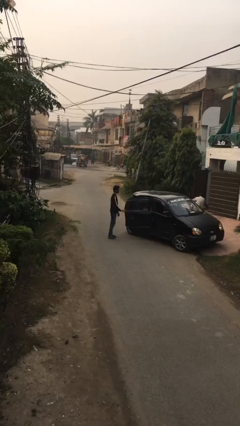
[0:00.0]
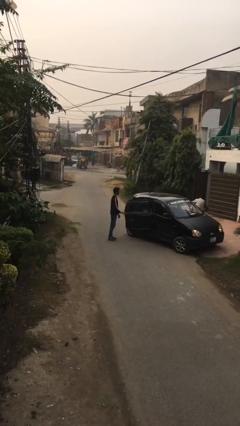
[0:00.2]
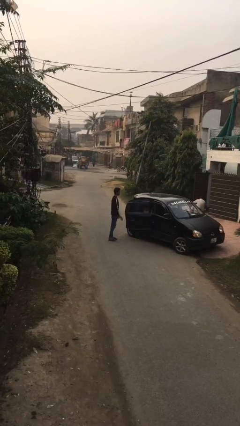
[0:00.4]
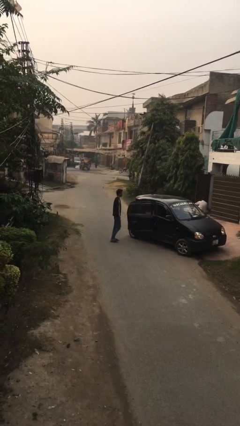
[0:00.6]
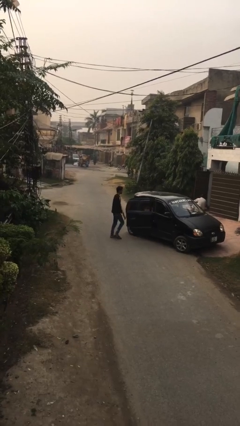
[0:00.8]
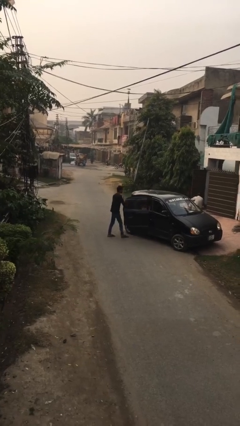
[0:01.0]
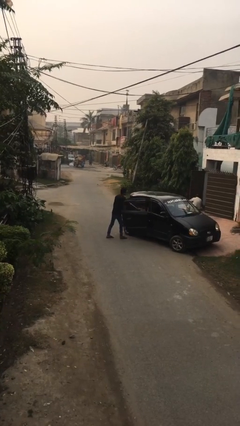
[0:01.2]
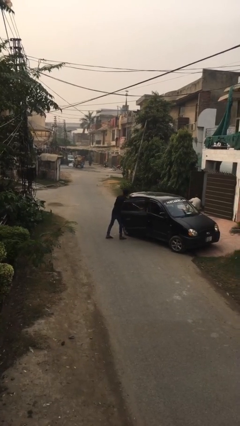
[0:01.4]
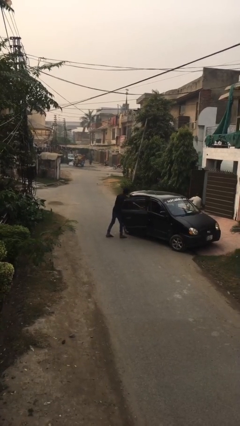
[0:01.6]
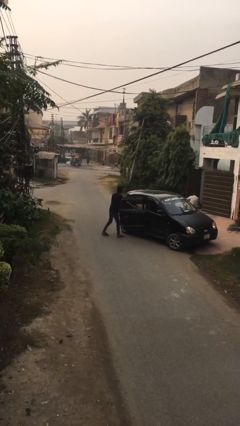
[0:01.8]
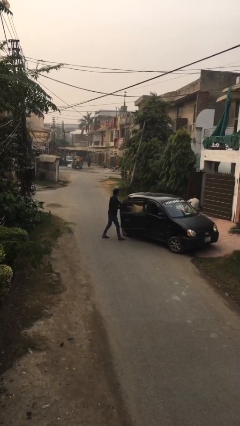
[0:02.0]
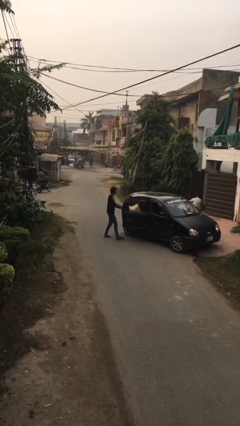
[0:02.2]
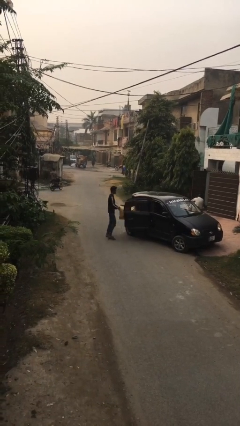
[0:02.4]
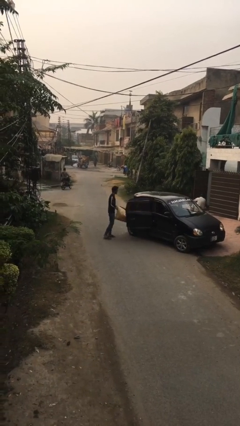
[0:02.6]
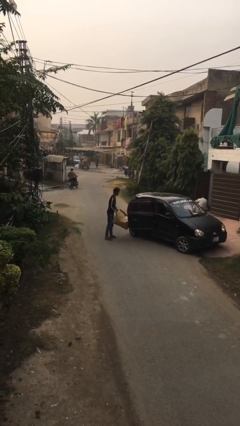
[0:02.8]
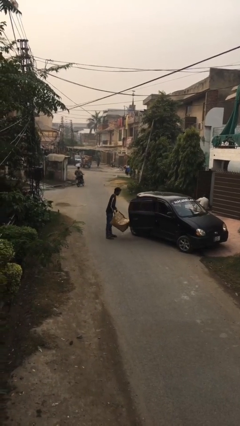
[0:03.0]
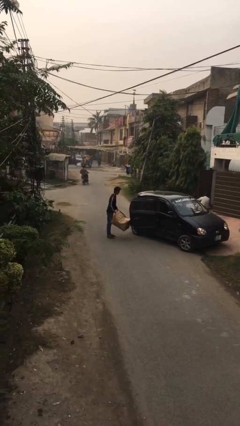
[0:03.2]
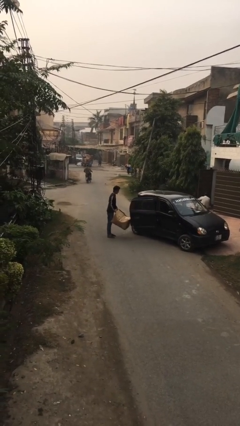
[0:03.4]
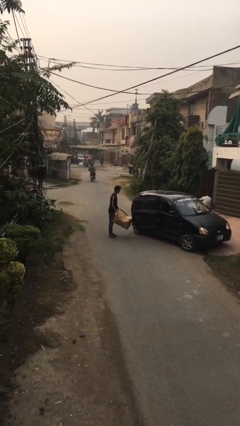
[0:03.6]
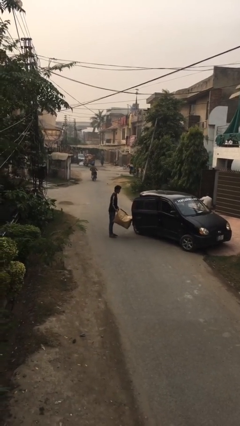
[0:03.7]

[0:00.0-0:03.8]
person unloads car

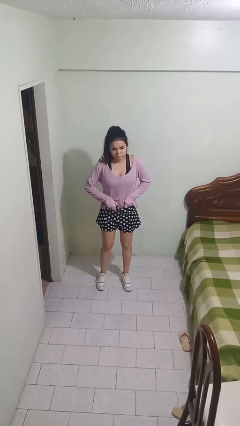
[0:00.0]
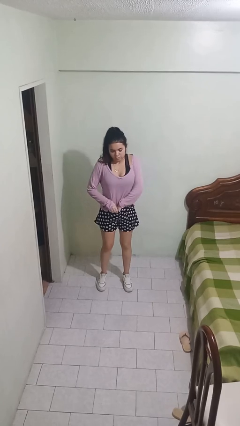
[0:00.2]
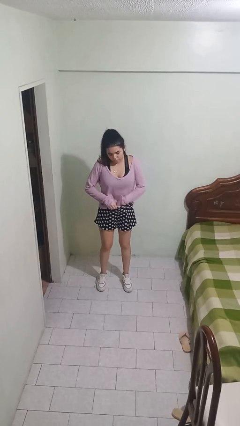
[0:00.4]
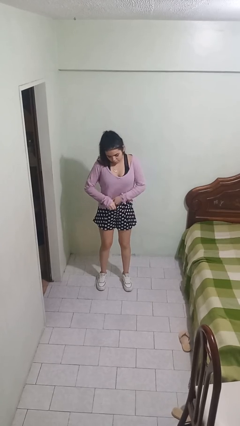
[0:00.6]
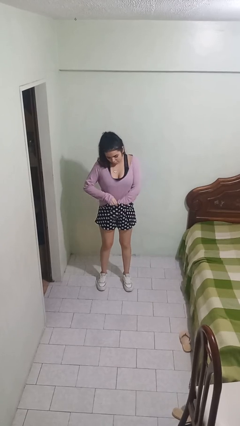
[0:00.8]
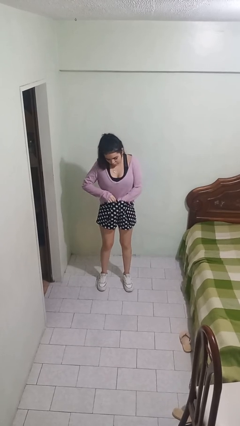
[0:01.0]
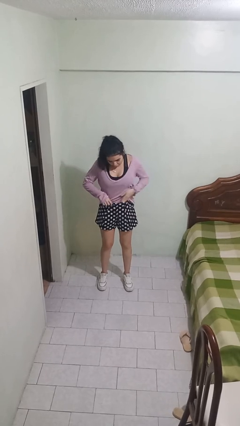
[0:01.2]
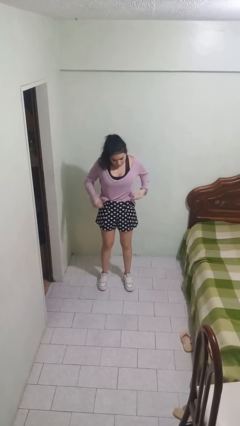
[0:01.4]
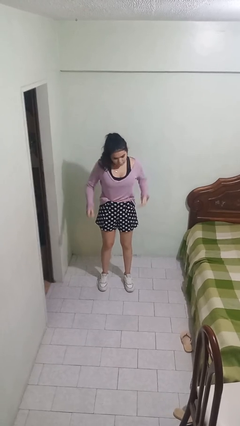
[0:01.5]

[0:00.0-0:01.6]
person tucks in shirt

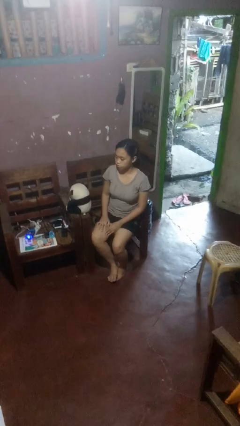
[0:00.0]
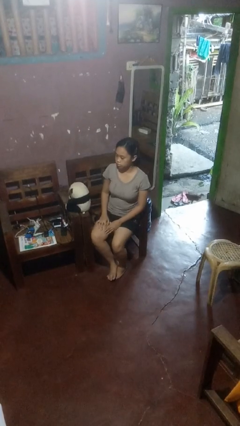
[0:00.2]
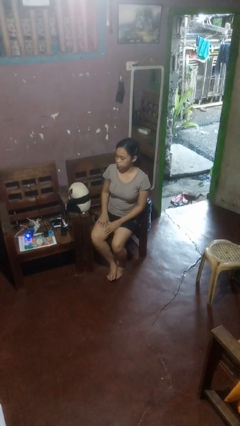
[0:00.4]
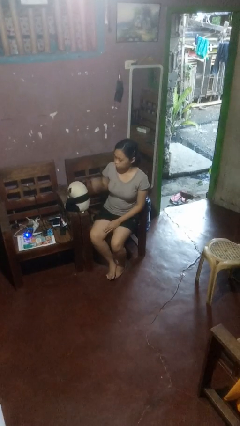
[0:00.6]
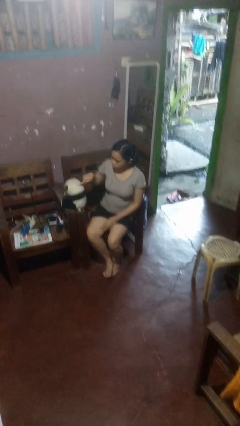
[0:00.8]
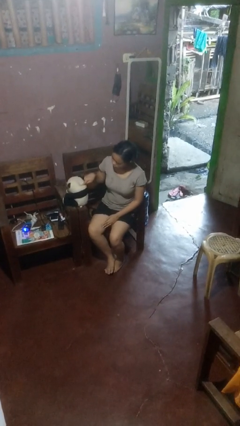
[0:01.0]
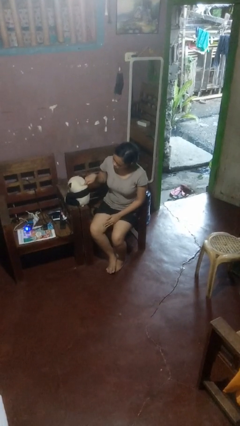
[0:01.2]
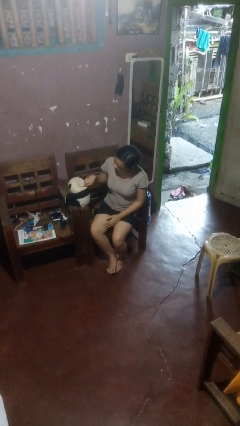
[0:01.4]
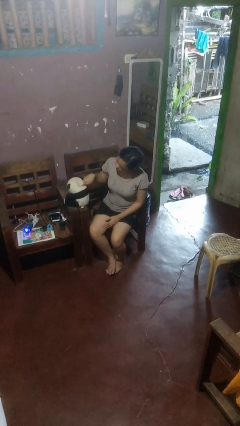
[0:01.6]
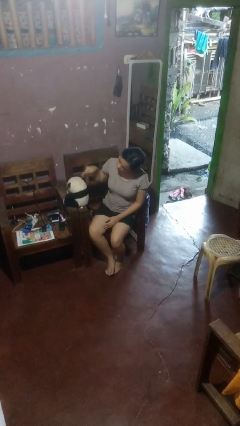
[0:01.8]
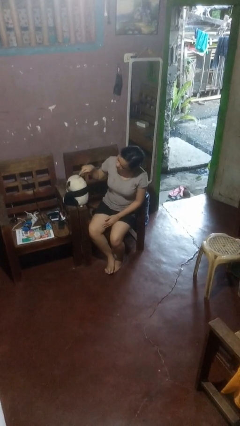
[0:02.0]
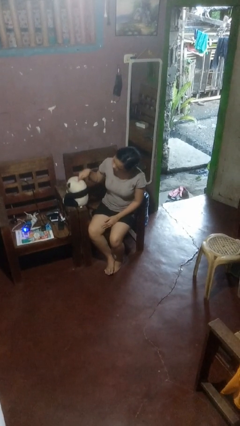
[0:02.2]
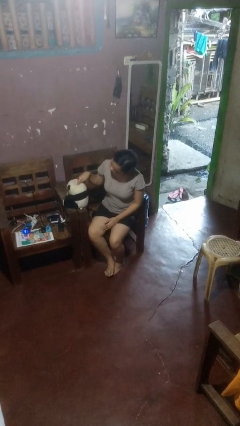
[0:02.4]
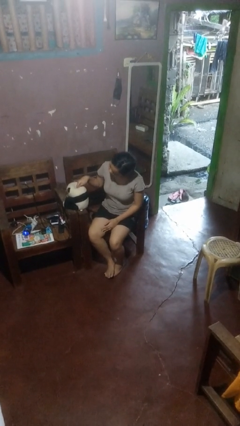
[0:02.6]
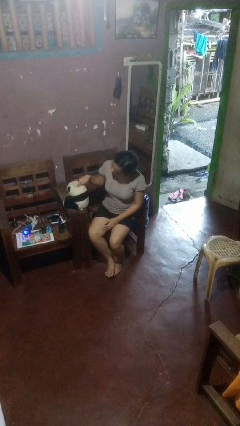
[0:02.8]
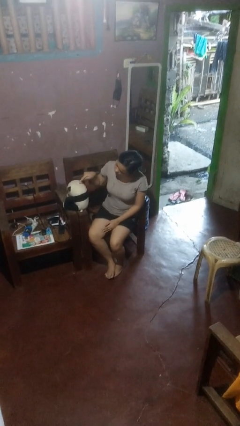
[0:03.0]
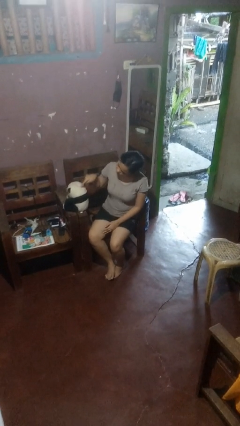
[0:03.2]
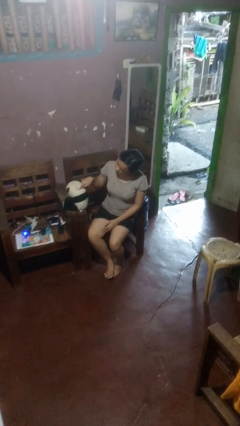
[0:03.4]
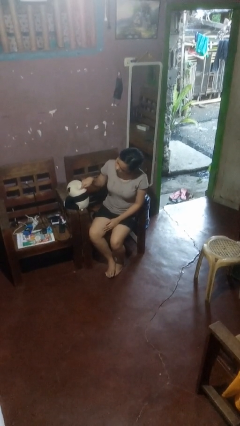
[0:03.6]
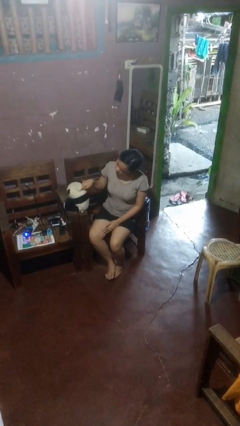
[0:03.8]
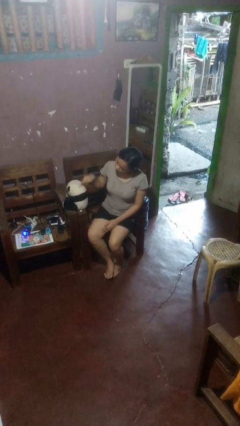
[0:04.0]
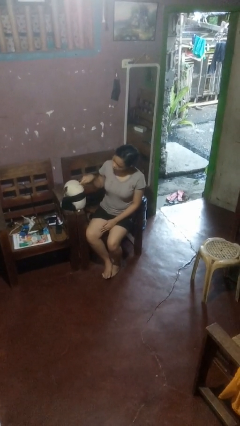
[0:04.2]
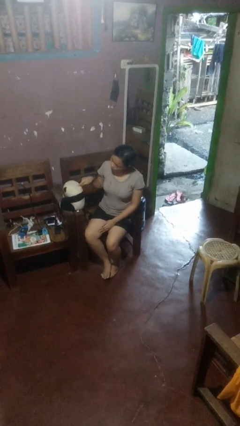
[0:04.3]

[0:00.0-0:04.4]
person taps object with finger

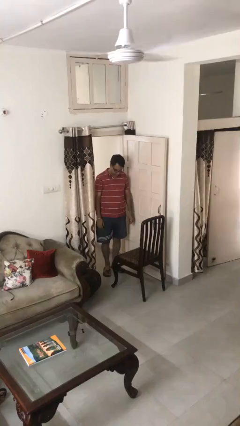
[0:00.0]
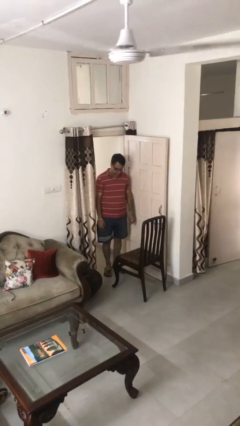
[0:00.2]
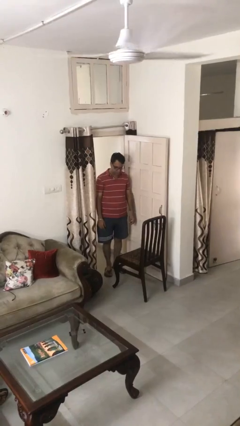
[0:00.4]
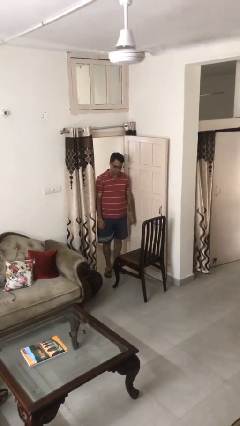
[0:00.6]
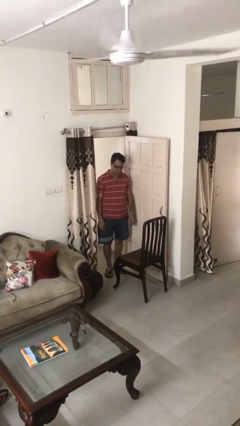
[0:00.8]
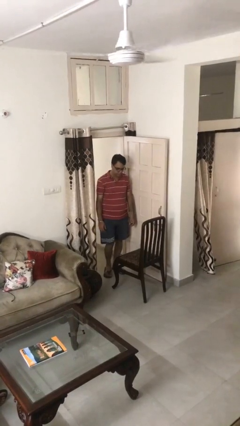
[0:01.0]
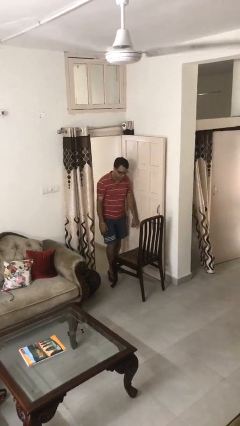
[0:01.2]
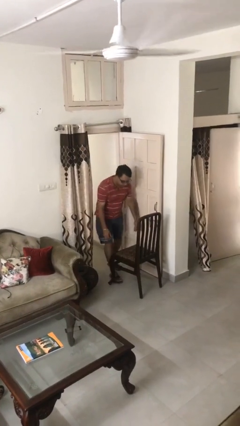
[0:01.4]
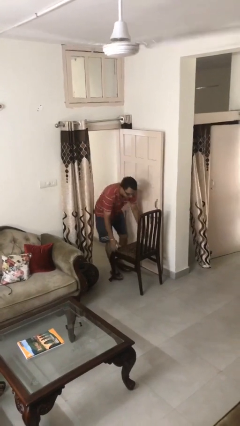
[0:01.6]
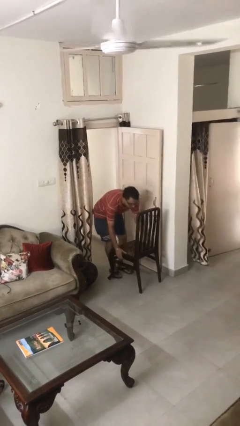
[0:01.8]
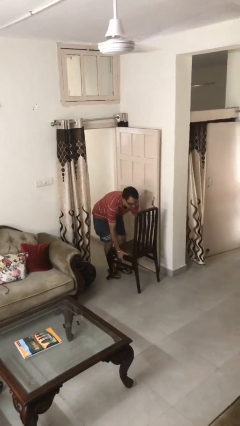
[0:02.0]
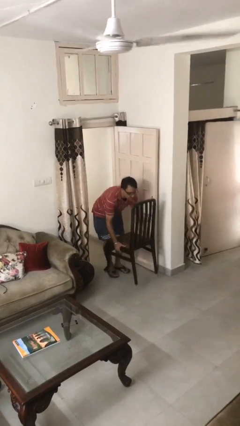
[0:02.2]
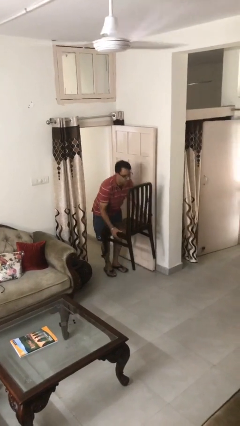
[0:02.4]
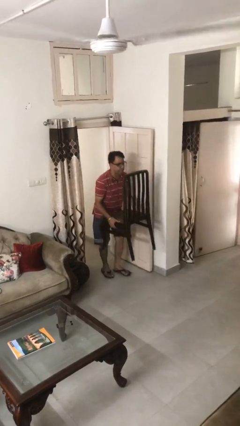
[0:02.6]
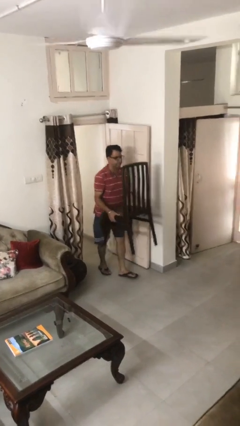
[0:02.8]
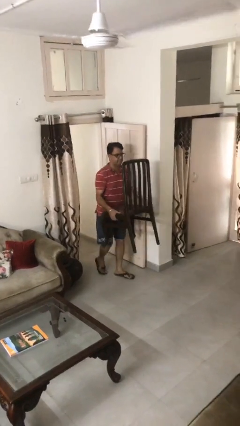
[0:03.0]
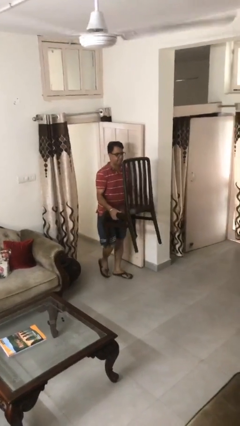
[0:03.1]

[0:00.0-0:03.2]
person picks up object from floor

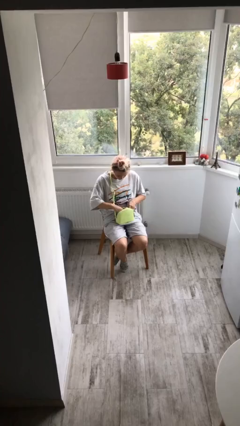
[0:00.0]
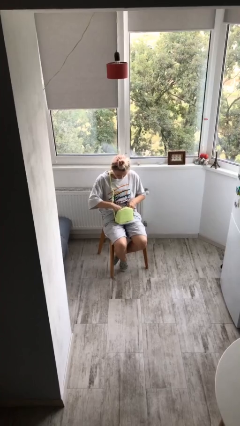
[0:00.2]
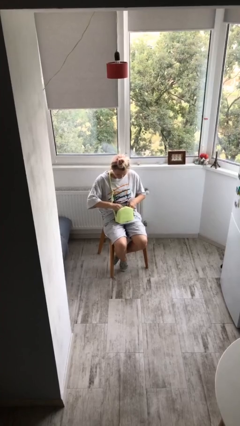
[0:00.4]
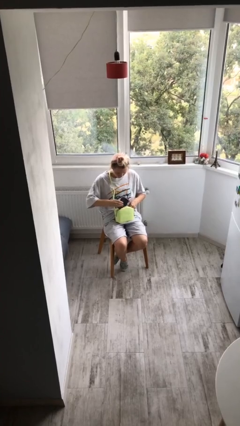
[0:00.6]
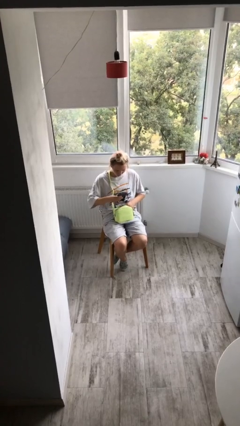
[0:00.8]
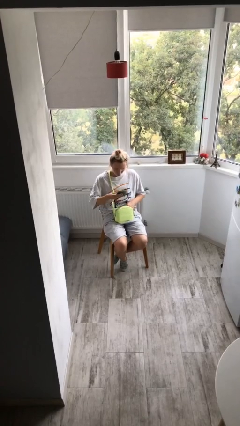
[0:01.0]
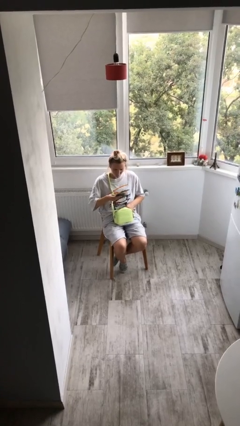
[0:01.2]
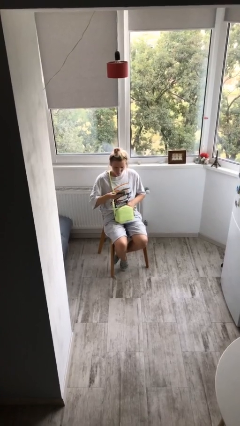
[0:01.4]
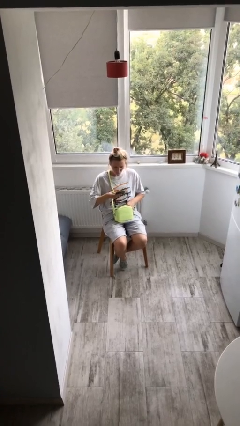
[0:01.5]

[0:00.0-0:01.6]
person takes object from purse

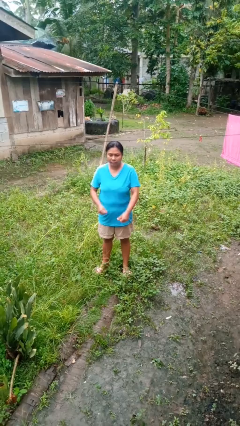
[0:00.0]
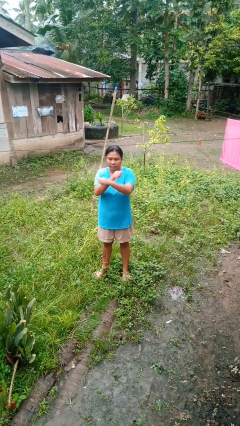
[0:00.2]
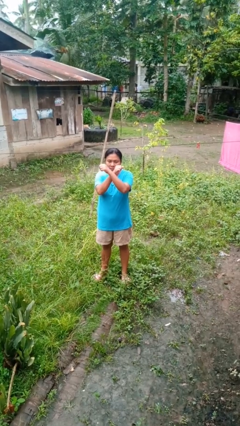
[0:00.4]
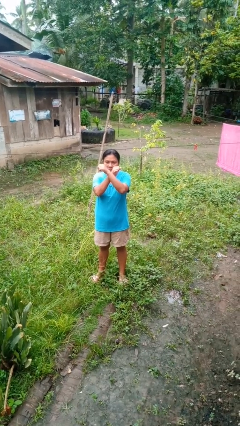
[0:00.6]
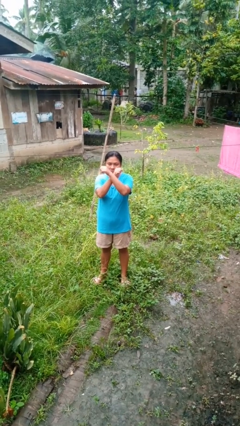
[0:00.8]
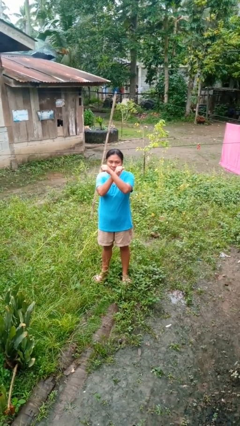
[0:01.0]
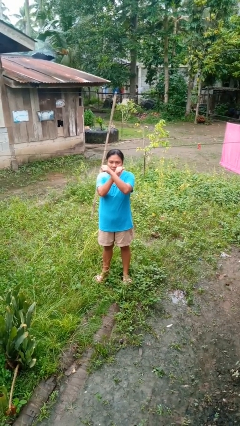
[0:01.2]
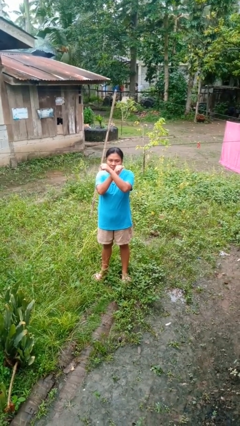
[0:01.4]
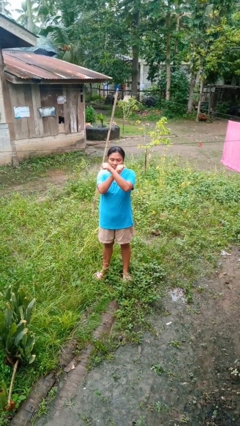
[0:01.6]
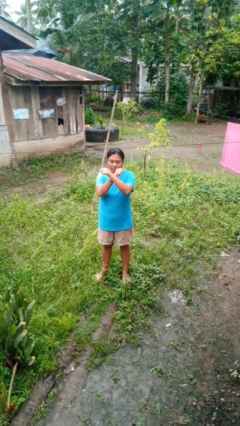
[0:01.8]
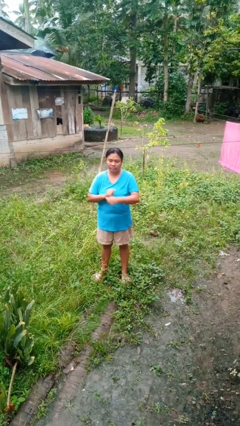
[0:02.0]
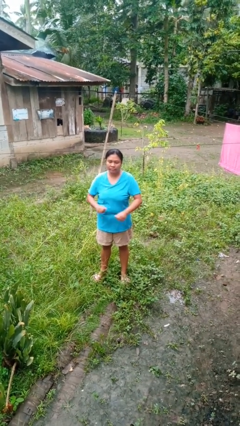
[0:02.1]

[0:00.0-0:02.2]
person gestures arms x

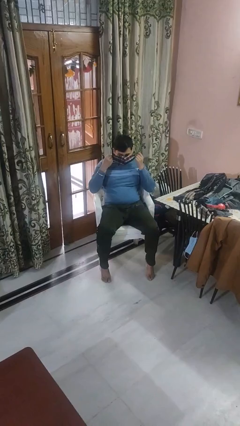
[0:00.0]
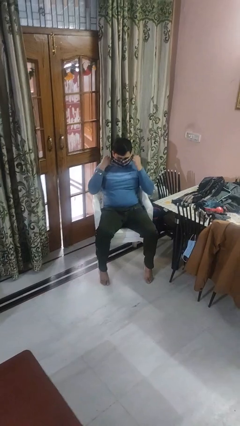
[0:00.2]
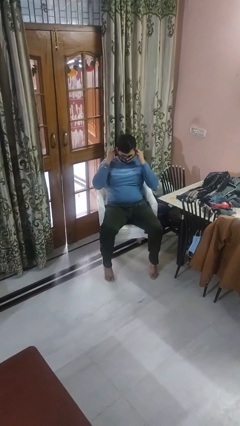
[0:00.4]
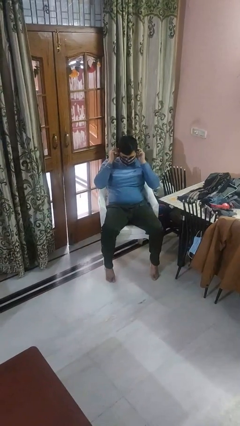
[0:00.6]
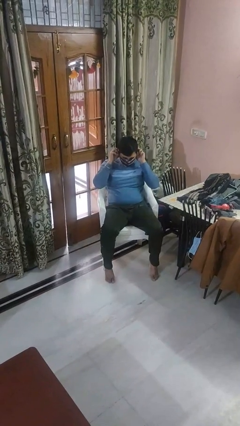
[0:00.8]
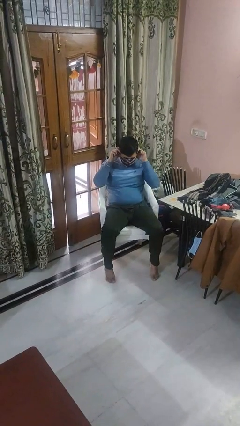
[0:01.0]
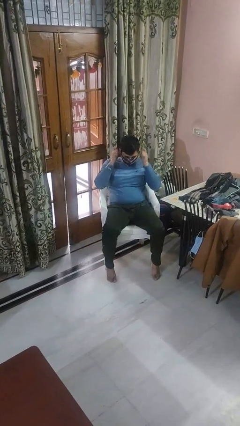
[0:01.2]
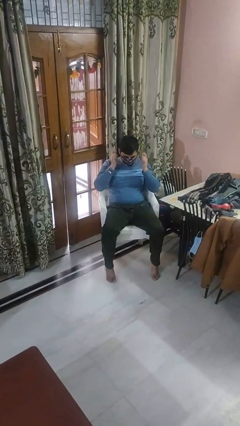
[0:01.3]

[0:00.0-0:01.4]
person puts on facemask
